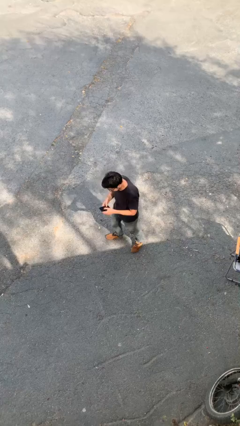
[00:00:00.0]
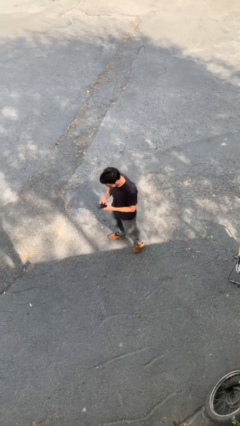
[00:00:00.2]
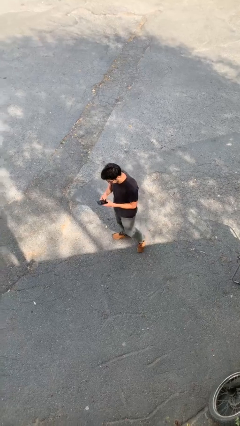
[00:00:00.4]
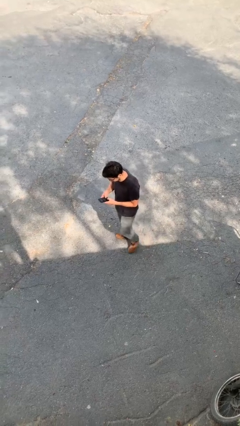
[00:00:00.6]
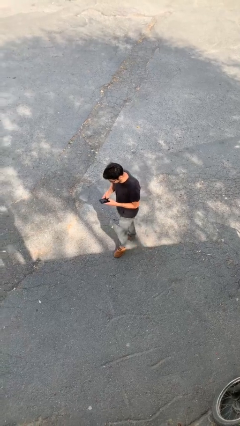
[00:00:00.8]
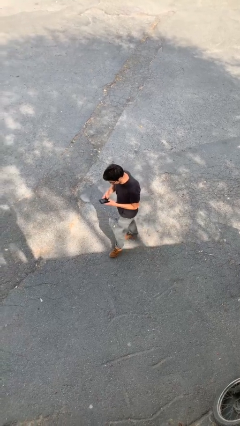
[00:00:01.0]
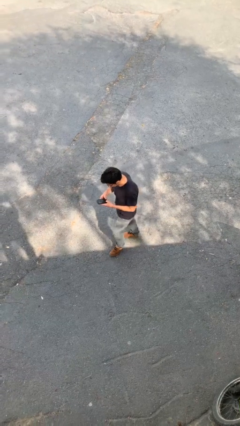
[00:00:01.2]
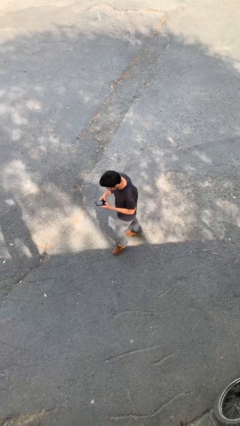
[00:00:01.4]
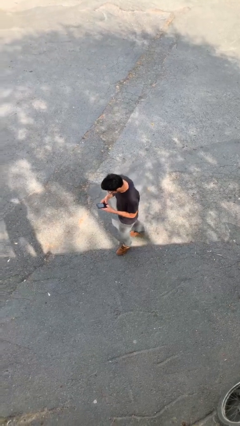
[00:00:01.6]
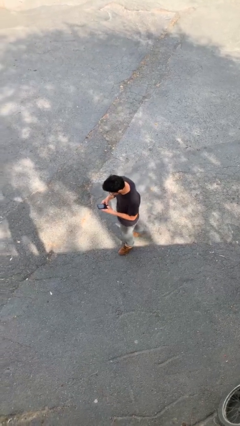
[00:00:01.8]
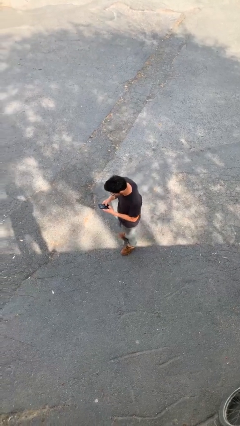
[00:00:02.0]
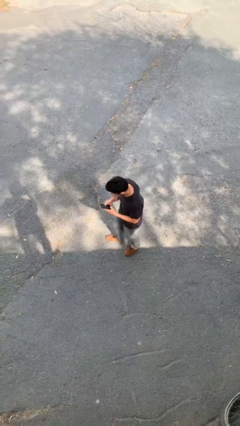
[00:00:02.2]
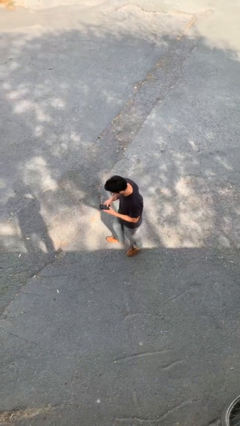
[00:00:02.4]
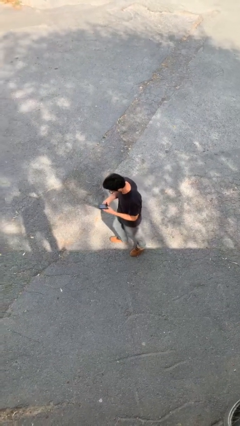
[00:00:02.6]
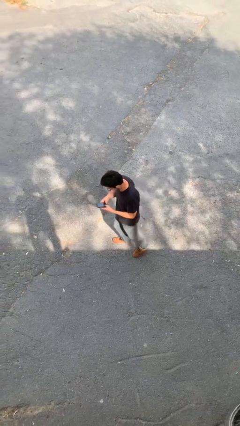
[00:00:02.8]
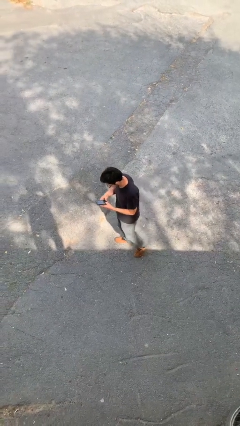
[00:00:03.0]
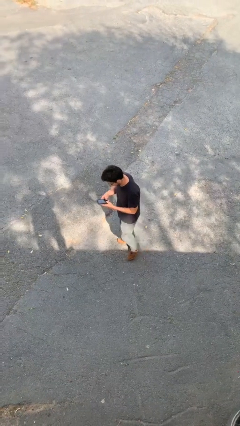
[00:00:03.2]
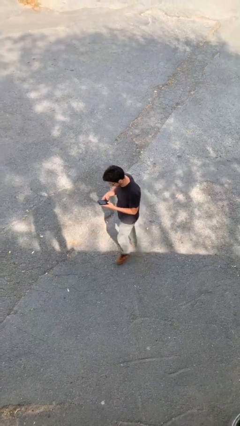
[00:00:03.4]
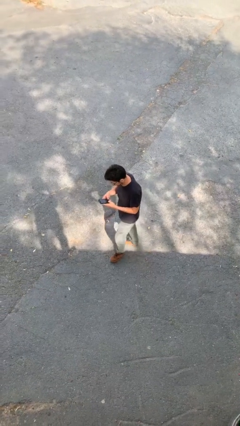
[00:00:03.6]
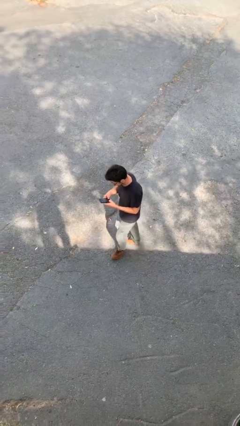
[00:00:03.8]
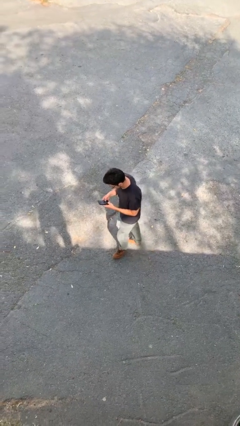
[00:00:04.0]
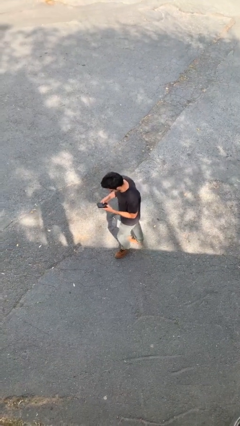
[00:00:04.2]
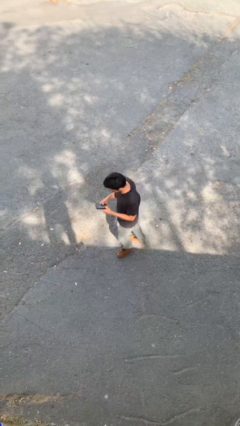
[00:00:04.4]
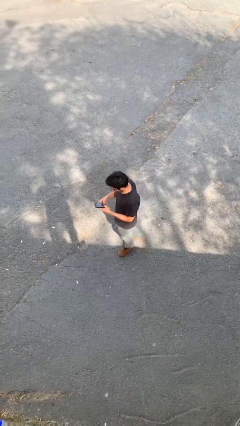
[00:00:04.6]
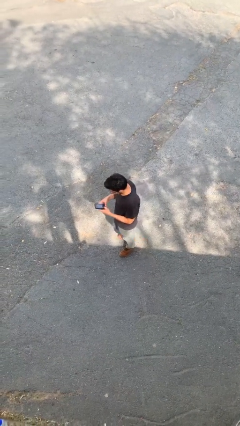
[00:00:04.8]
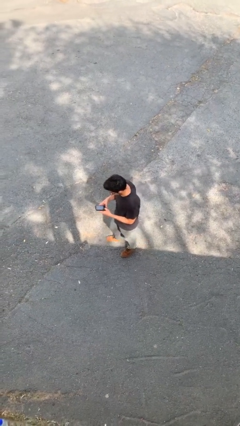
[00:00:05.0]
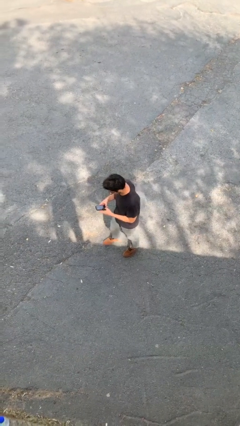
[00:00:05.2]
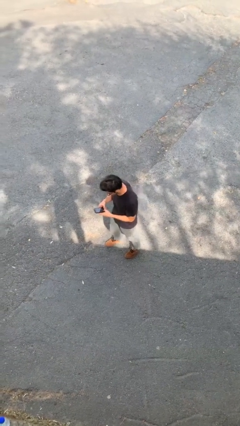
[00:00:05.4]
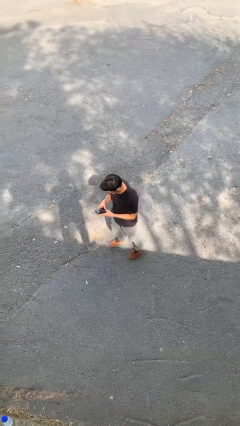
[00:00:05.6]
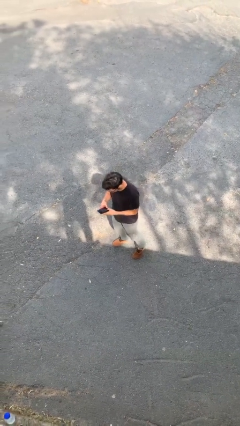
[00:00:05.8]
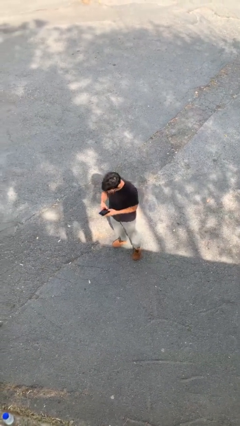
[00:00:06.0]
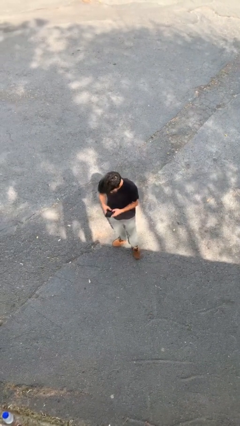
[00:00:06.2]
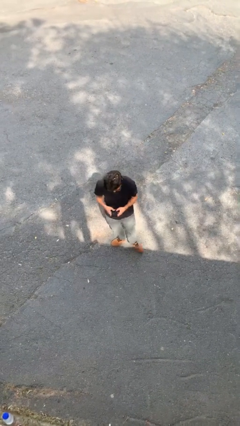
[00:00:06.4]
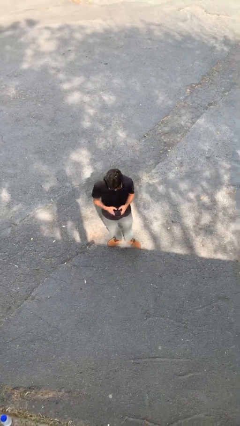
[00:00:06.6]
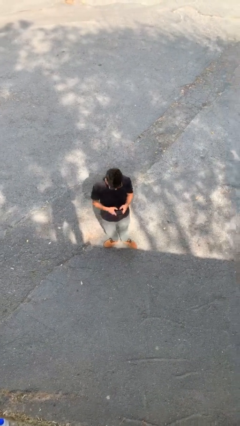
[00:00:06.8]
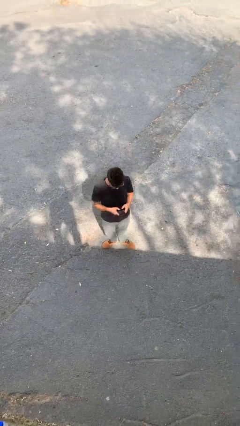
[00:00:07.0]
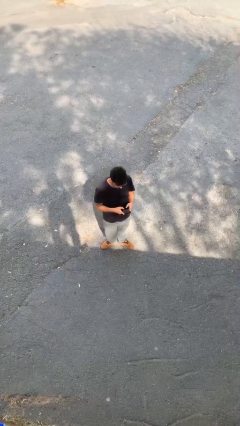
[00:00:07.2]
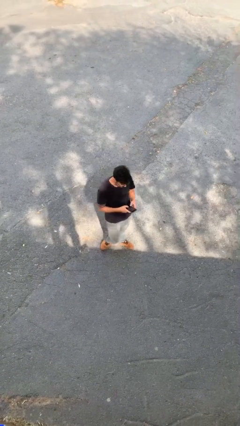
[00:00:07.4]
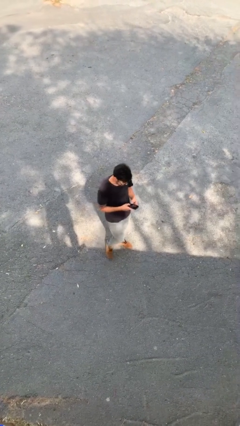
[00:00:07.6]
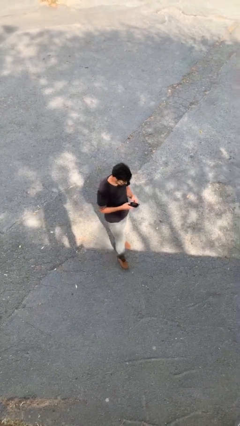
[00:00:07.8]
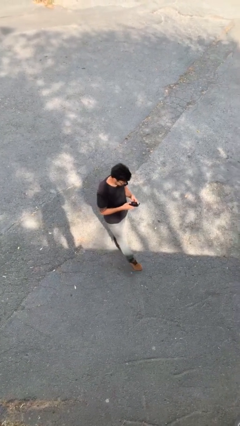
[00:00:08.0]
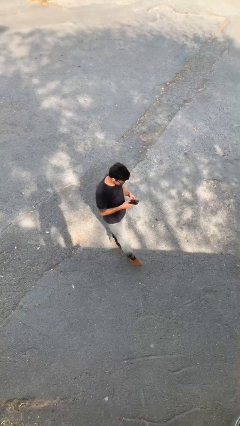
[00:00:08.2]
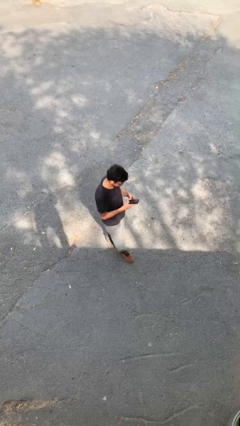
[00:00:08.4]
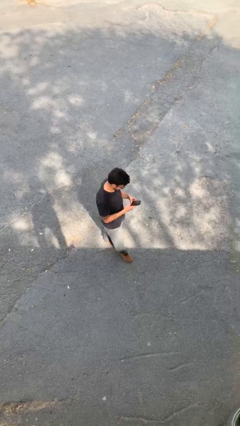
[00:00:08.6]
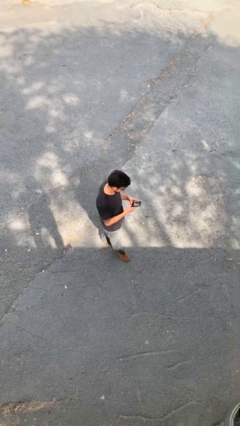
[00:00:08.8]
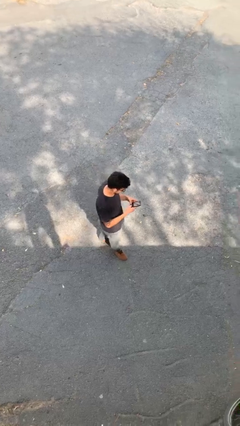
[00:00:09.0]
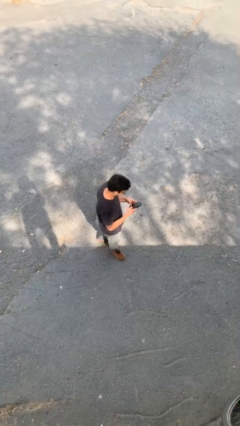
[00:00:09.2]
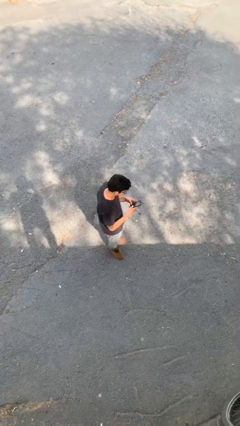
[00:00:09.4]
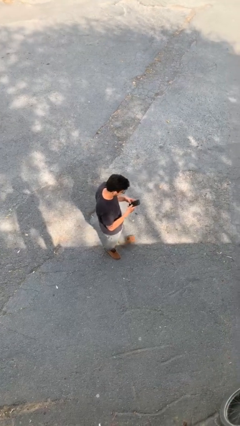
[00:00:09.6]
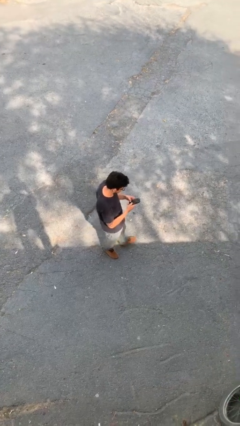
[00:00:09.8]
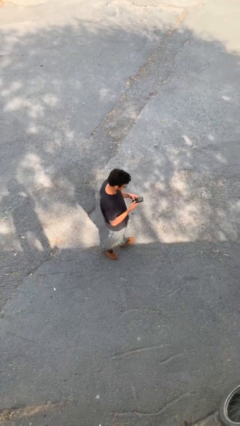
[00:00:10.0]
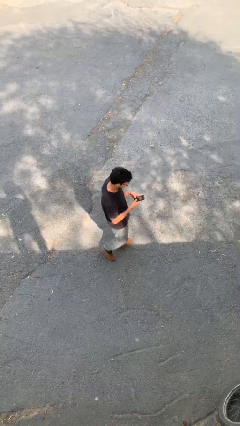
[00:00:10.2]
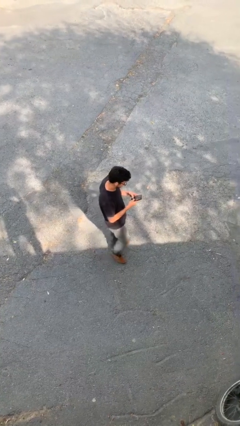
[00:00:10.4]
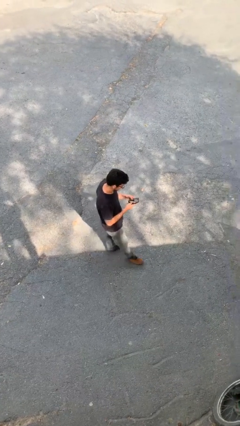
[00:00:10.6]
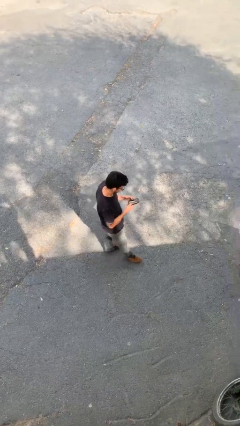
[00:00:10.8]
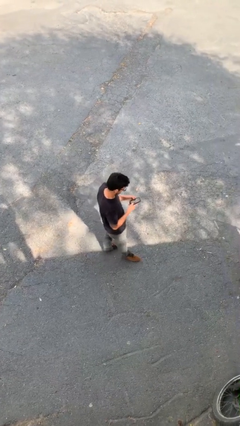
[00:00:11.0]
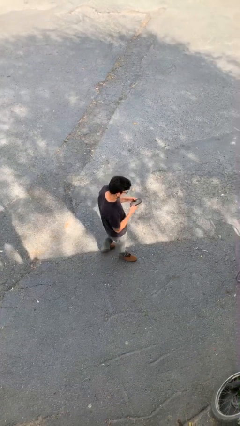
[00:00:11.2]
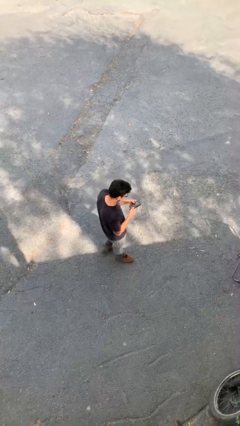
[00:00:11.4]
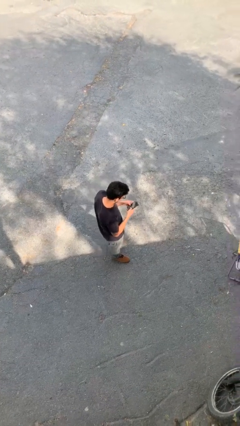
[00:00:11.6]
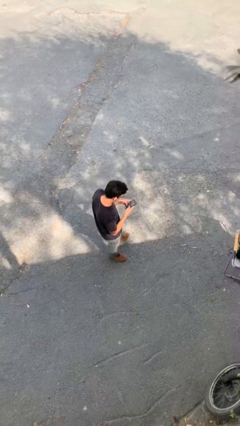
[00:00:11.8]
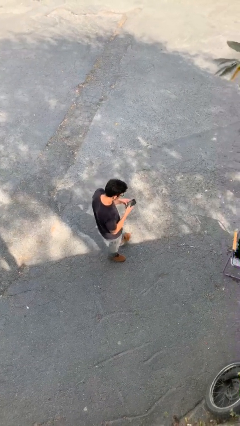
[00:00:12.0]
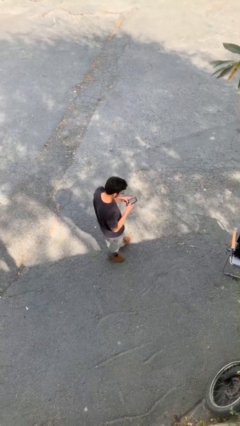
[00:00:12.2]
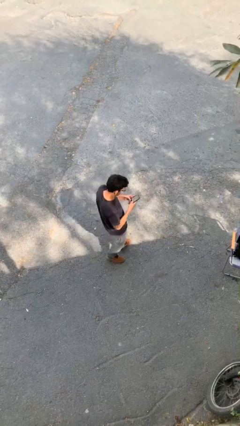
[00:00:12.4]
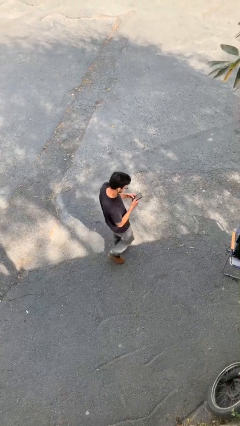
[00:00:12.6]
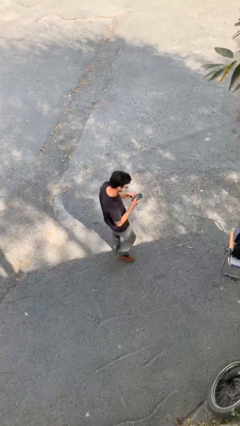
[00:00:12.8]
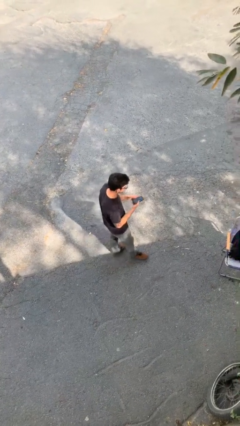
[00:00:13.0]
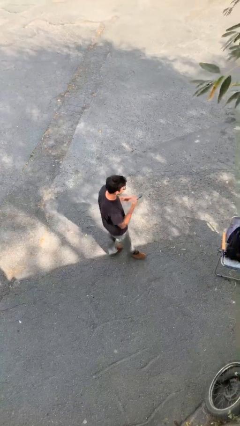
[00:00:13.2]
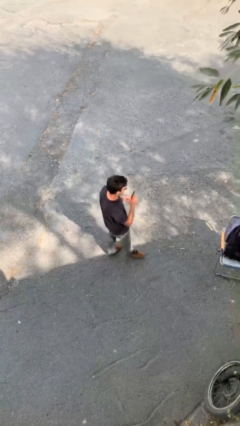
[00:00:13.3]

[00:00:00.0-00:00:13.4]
person texts on phone

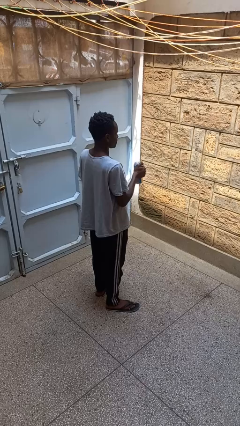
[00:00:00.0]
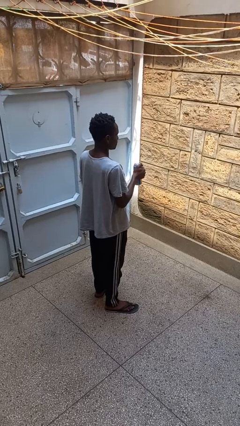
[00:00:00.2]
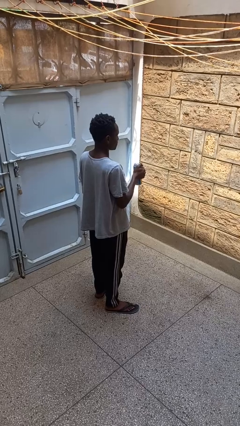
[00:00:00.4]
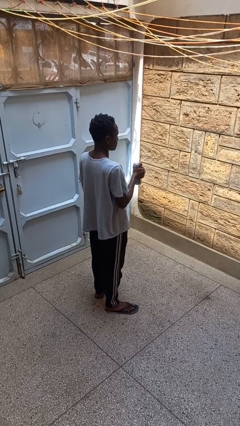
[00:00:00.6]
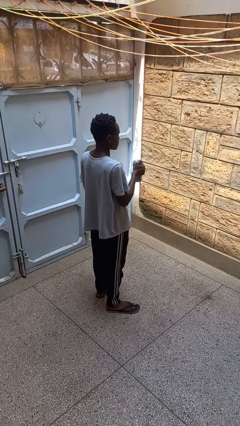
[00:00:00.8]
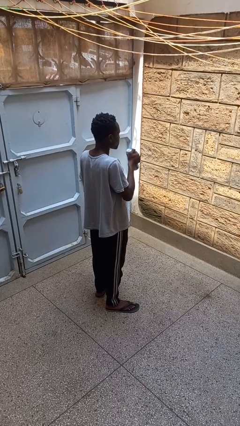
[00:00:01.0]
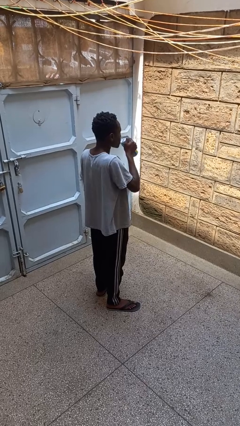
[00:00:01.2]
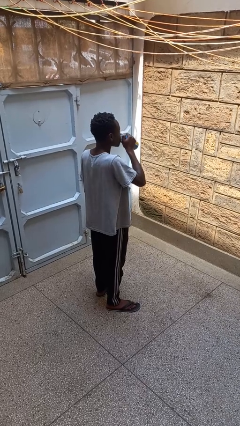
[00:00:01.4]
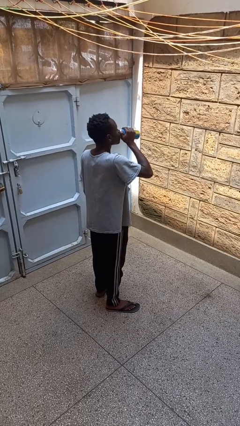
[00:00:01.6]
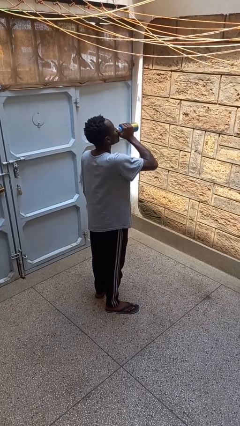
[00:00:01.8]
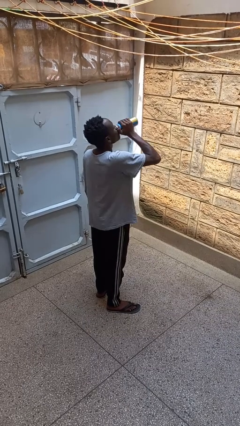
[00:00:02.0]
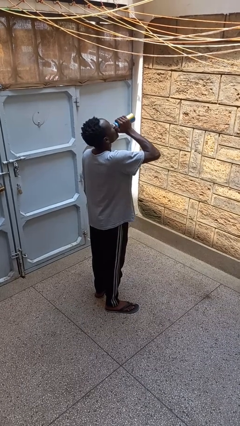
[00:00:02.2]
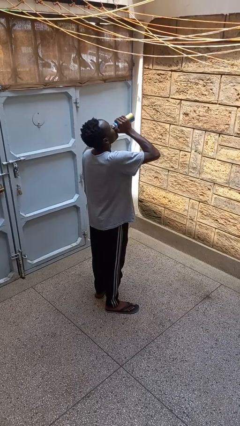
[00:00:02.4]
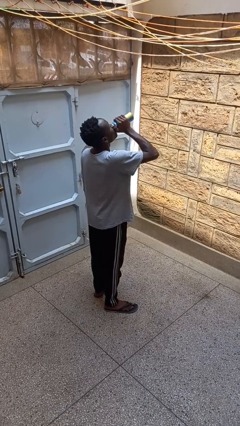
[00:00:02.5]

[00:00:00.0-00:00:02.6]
person drinks from beverage can

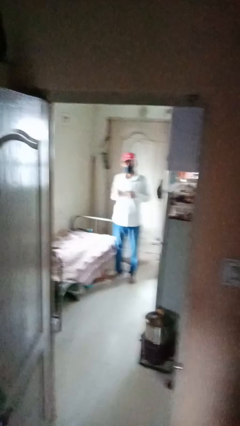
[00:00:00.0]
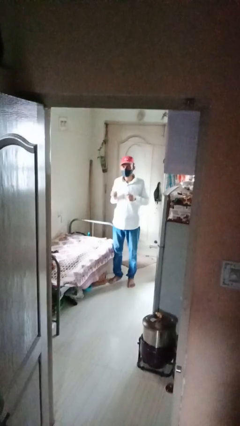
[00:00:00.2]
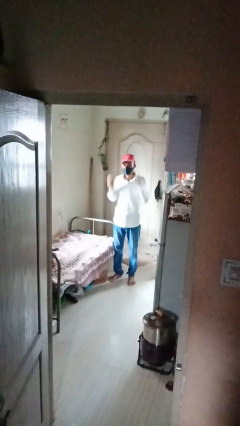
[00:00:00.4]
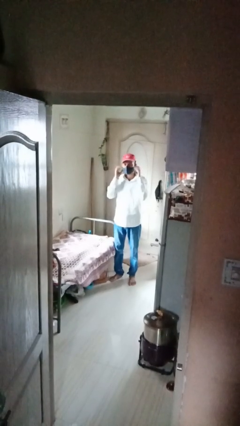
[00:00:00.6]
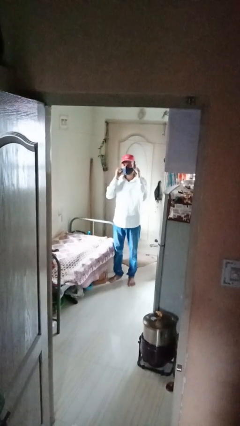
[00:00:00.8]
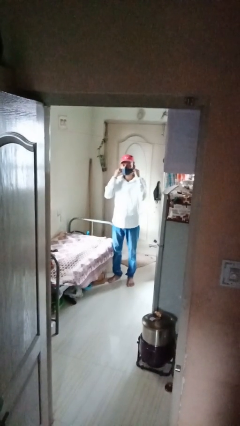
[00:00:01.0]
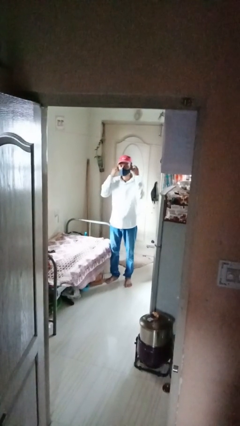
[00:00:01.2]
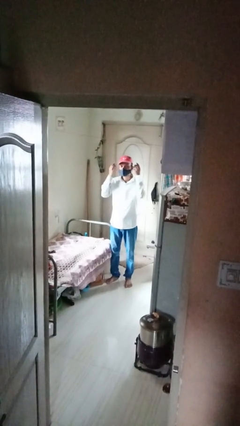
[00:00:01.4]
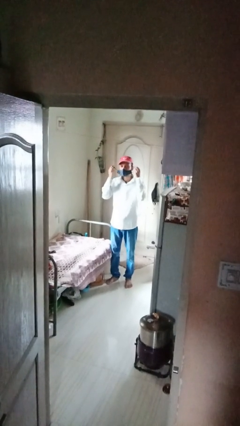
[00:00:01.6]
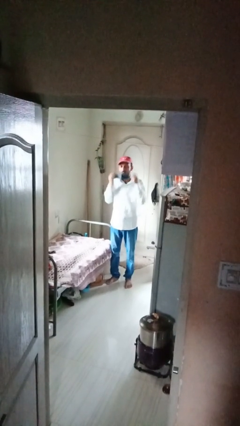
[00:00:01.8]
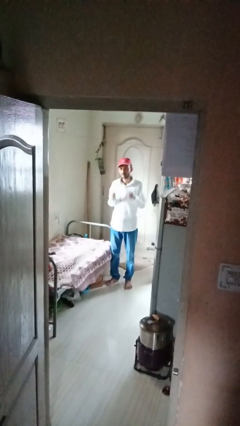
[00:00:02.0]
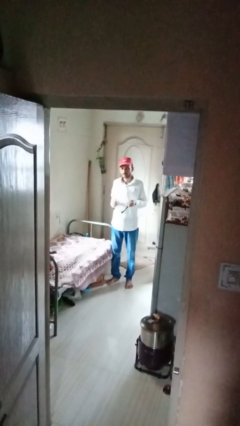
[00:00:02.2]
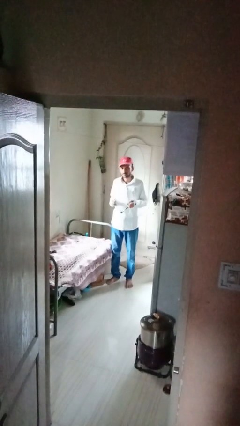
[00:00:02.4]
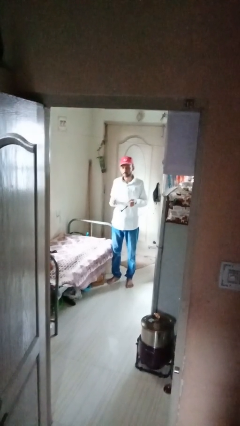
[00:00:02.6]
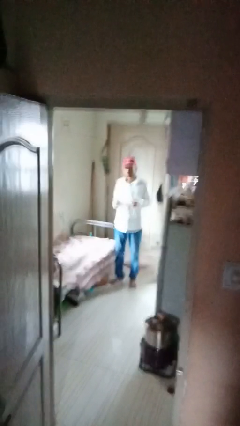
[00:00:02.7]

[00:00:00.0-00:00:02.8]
person takes off facemask
